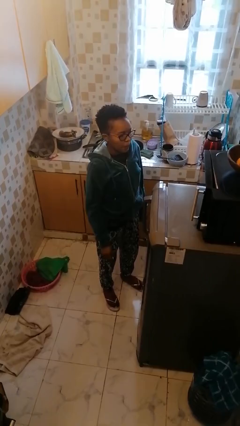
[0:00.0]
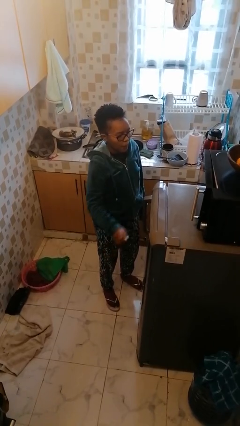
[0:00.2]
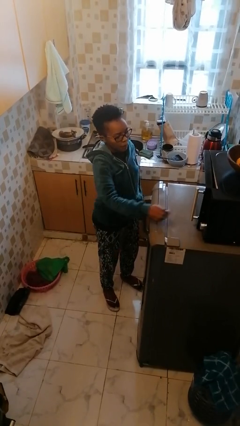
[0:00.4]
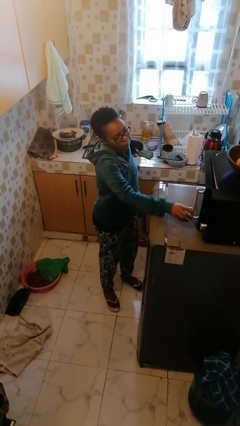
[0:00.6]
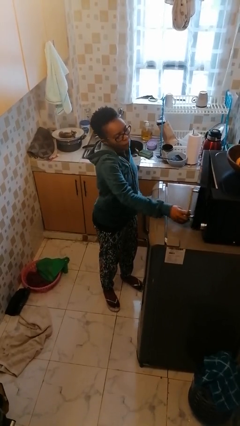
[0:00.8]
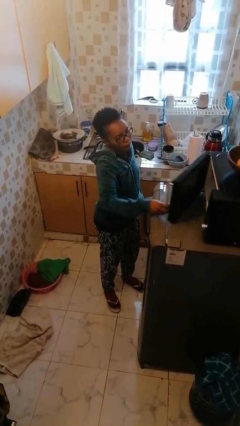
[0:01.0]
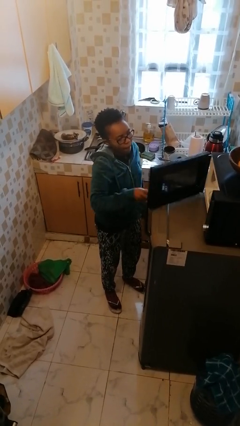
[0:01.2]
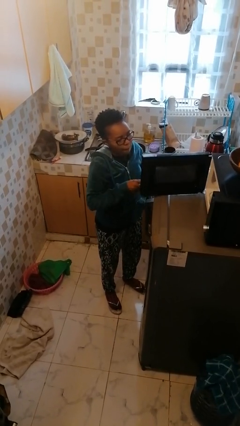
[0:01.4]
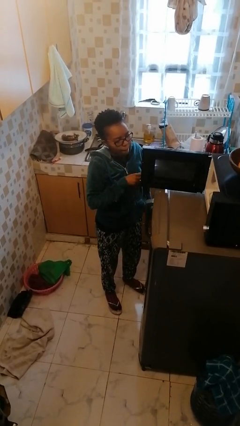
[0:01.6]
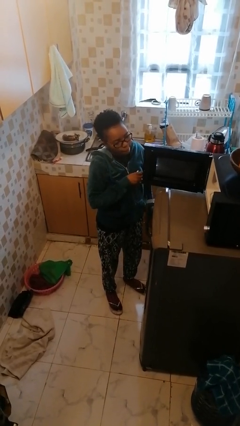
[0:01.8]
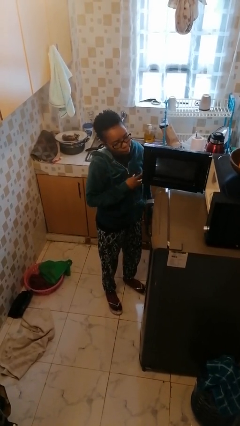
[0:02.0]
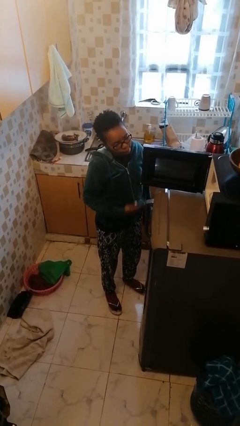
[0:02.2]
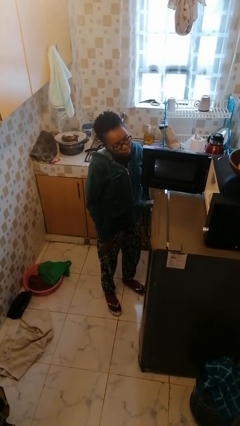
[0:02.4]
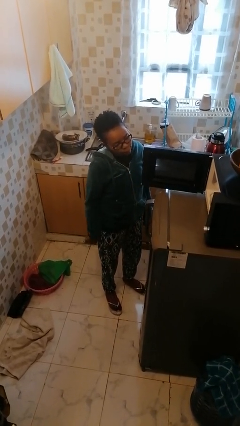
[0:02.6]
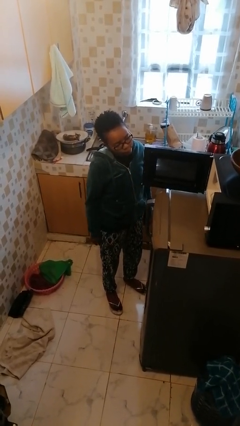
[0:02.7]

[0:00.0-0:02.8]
person opens microwave

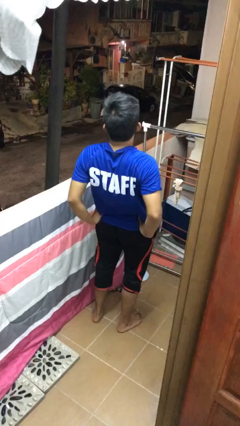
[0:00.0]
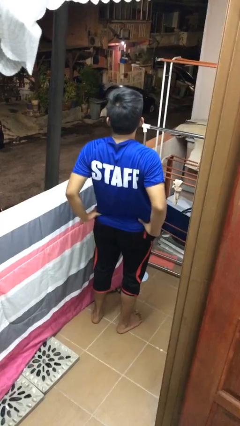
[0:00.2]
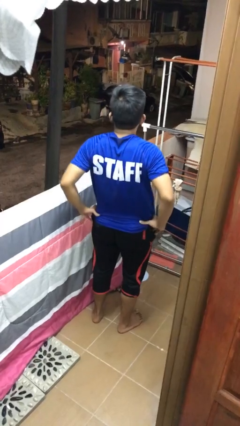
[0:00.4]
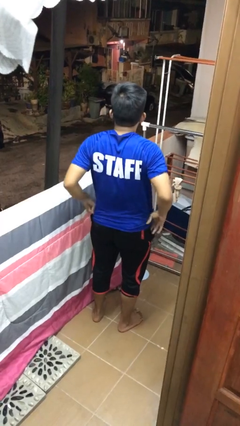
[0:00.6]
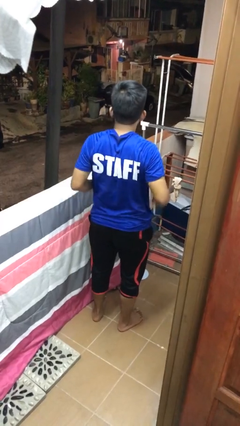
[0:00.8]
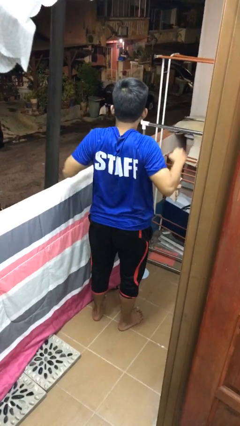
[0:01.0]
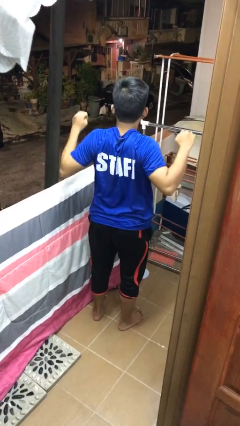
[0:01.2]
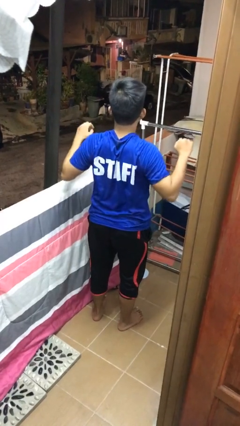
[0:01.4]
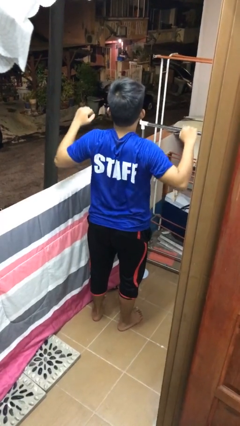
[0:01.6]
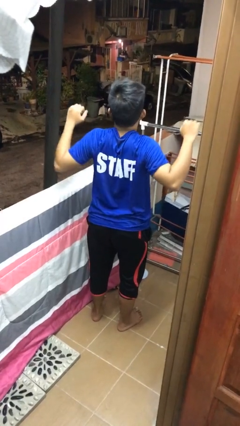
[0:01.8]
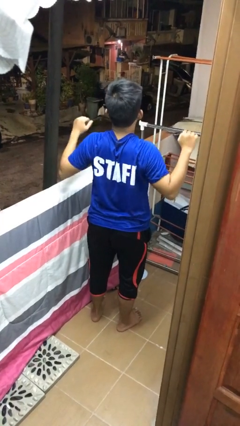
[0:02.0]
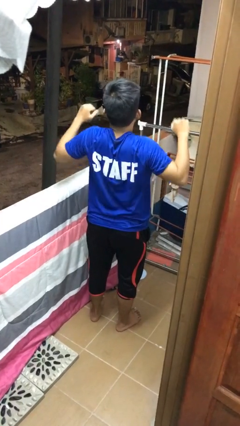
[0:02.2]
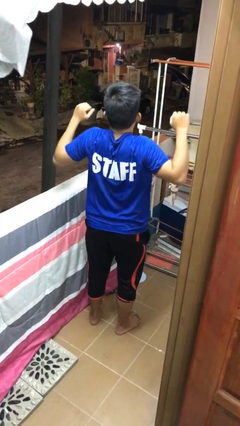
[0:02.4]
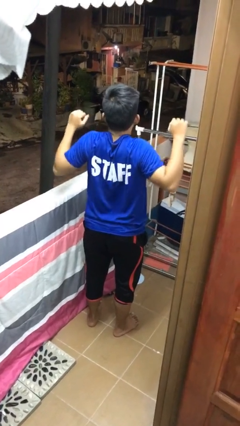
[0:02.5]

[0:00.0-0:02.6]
person stretches arms to side

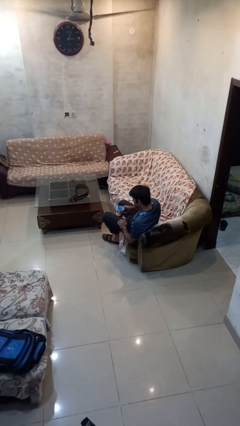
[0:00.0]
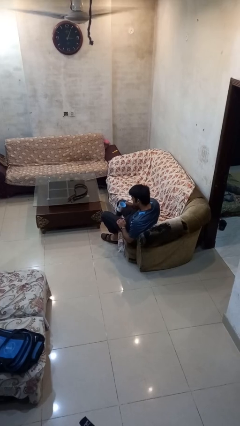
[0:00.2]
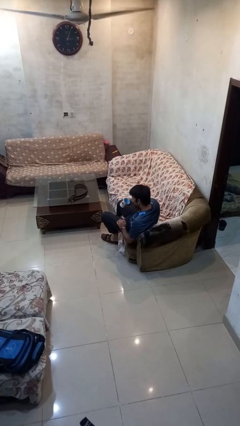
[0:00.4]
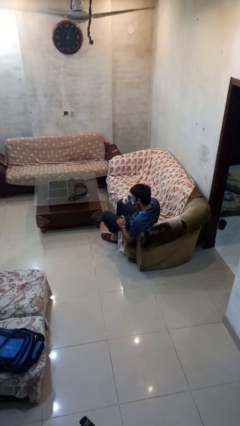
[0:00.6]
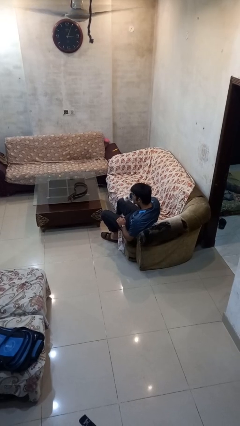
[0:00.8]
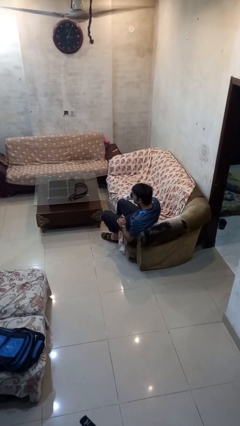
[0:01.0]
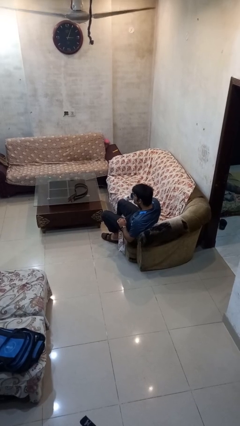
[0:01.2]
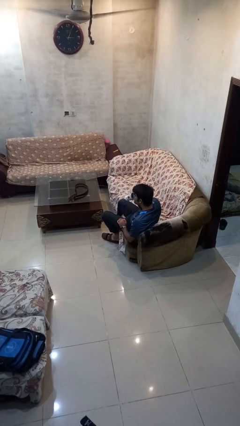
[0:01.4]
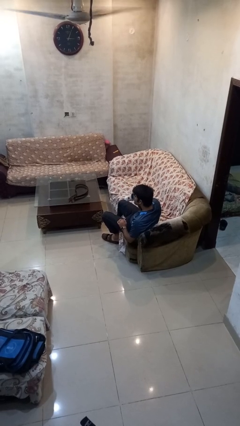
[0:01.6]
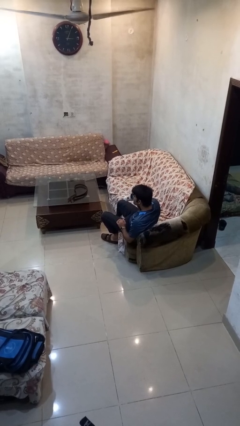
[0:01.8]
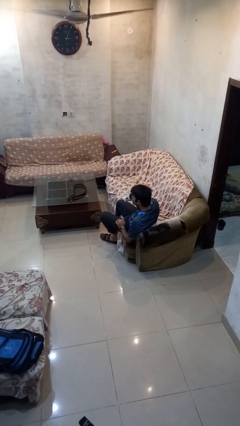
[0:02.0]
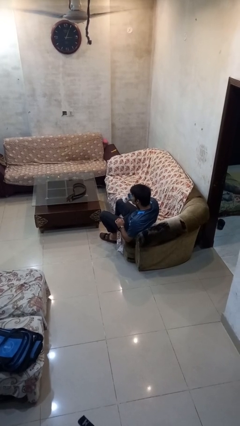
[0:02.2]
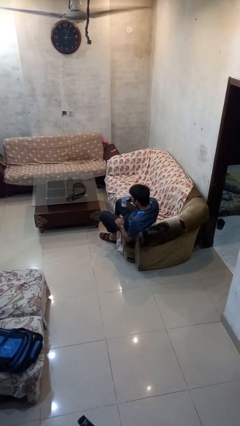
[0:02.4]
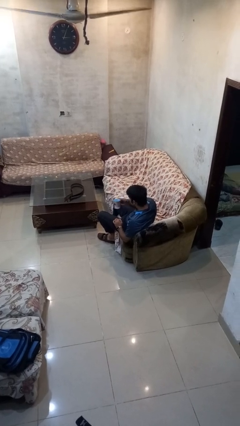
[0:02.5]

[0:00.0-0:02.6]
person drinks from mug

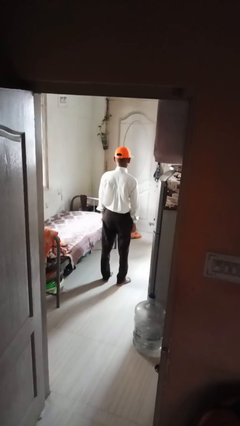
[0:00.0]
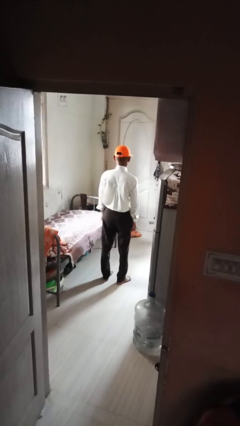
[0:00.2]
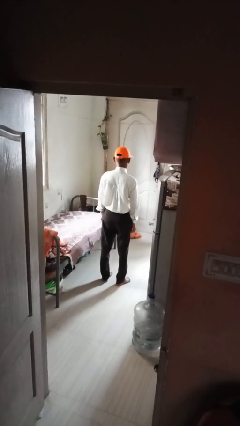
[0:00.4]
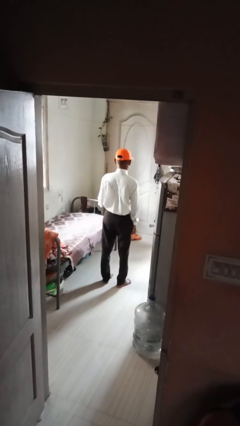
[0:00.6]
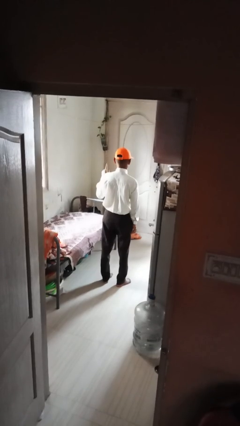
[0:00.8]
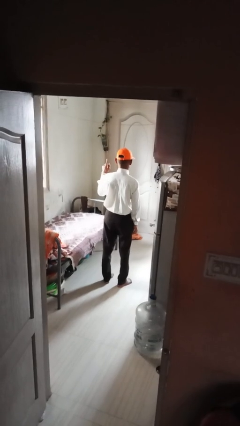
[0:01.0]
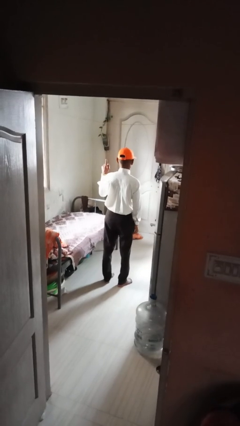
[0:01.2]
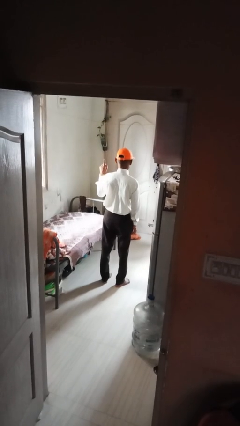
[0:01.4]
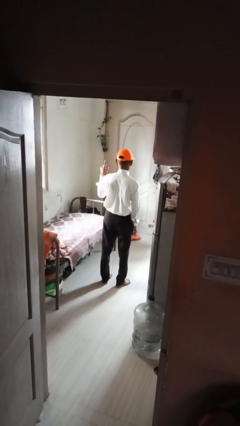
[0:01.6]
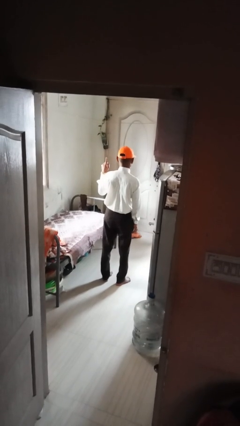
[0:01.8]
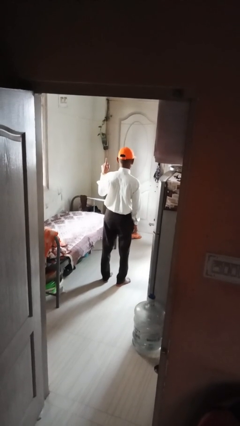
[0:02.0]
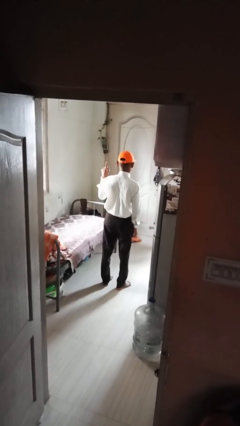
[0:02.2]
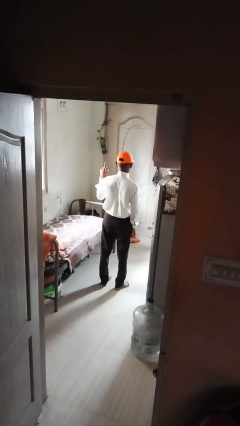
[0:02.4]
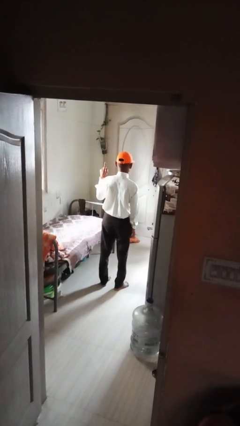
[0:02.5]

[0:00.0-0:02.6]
person gestures number one

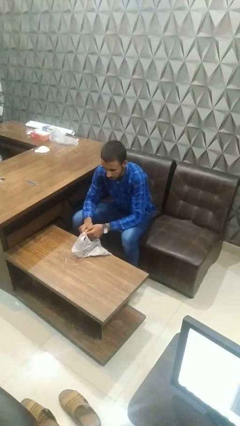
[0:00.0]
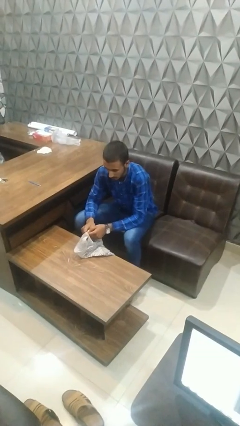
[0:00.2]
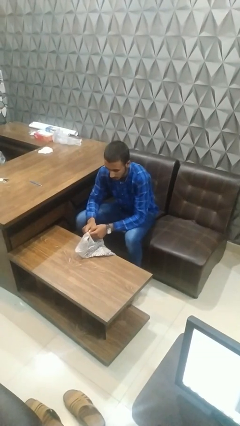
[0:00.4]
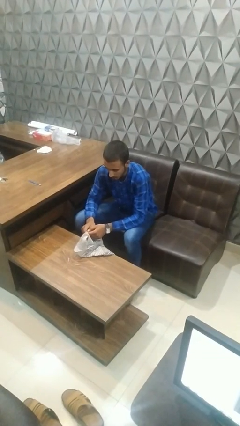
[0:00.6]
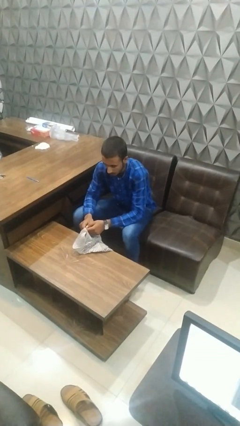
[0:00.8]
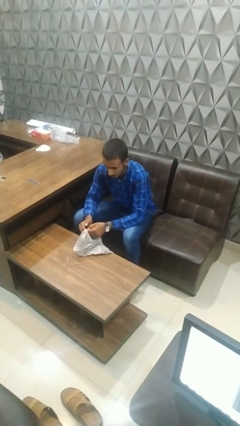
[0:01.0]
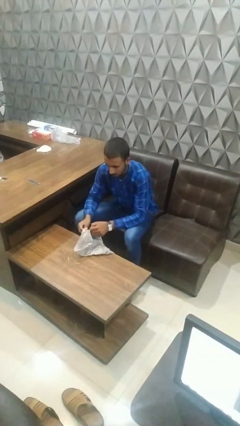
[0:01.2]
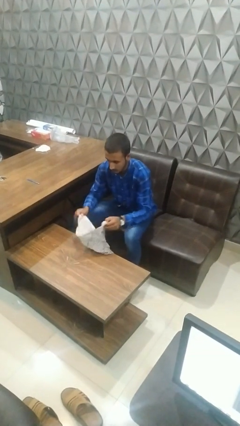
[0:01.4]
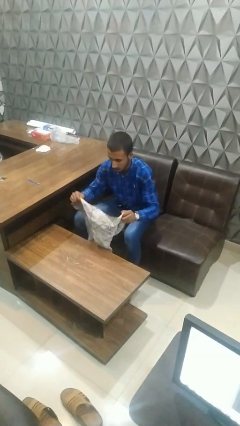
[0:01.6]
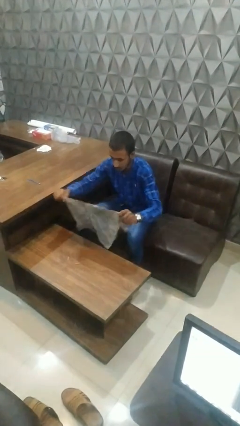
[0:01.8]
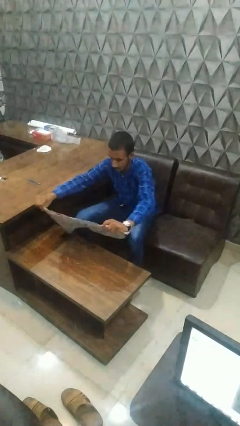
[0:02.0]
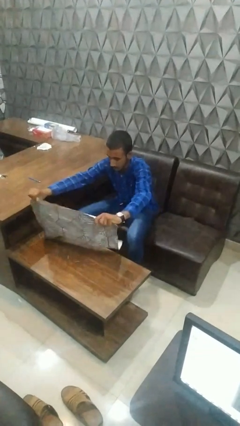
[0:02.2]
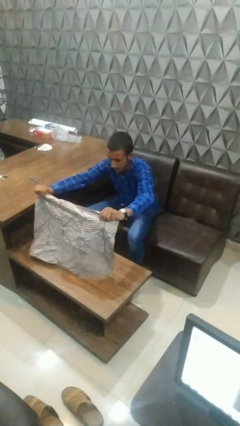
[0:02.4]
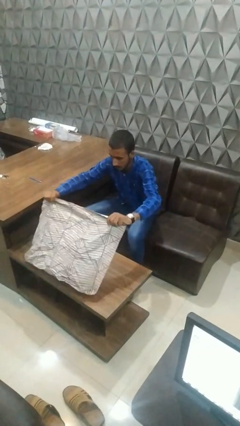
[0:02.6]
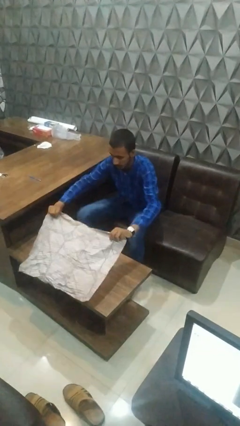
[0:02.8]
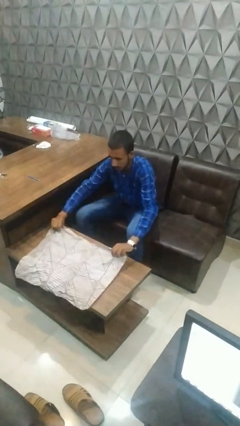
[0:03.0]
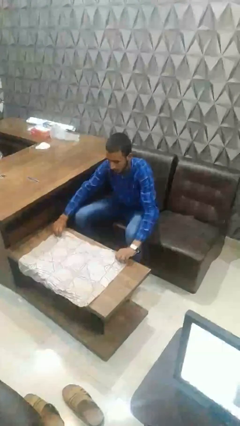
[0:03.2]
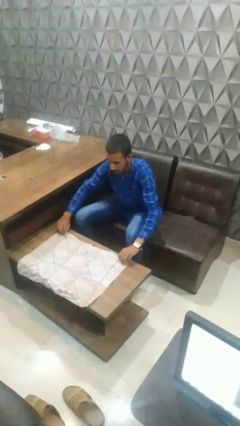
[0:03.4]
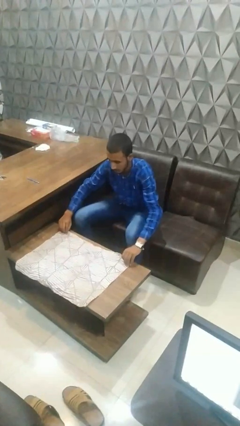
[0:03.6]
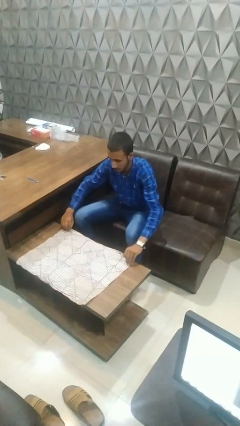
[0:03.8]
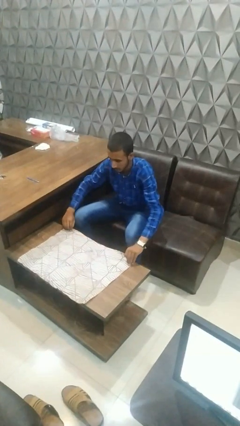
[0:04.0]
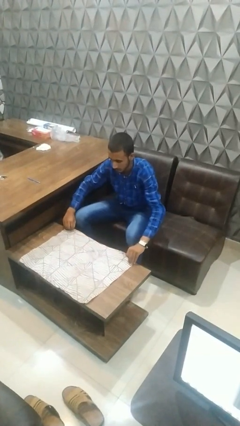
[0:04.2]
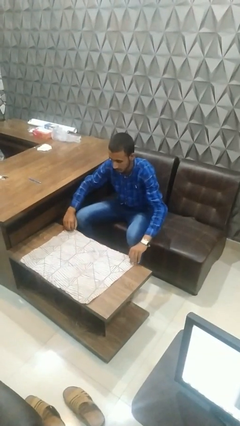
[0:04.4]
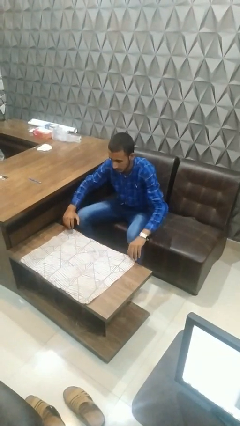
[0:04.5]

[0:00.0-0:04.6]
person spreads tablecloth

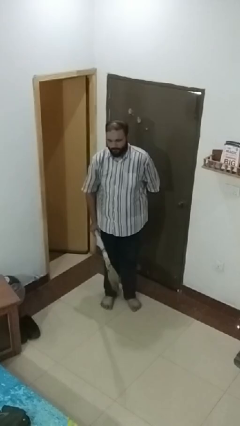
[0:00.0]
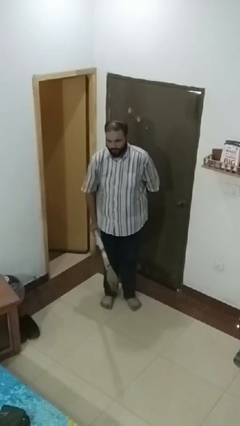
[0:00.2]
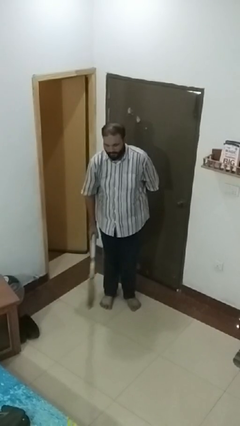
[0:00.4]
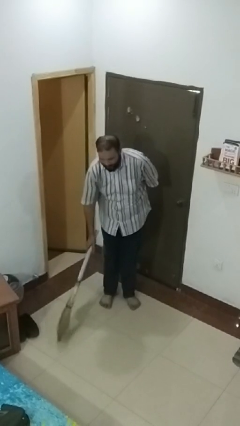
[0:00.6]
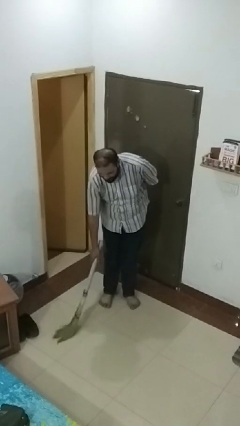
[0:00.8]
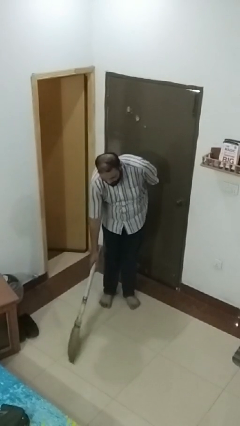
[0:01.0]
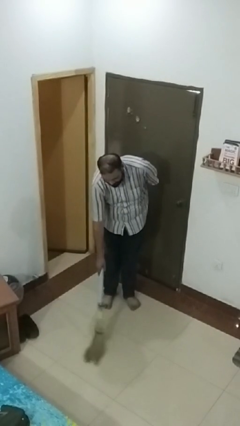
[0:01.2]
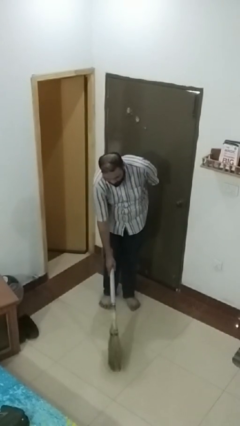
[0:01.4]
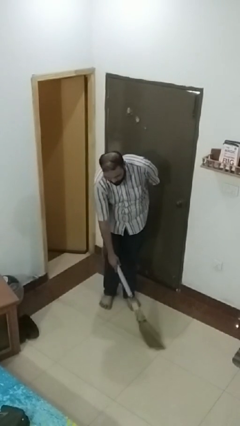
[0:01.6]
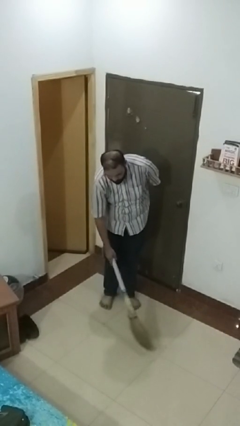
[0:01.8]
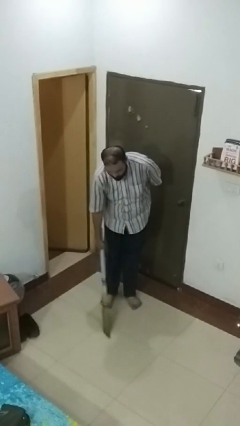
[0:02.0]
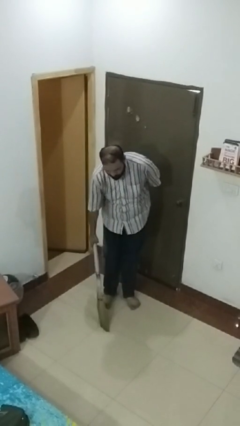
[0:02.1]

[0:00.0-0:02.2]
person sweeps floor
